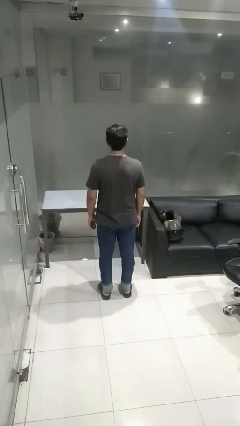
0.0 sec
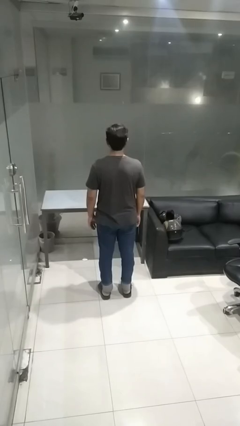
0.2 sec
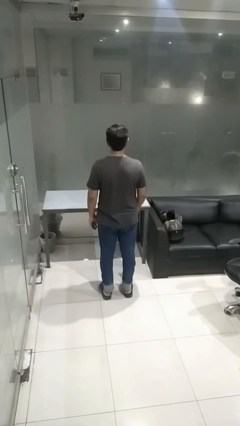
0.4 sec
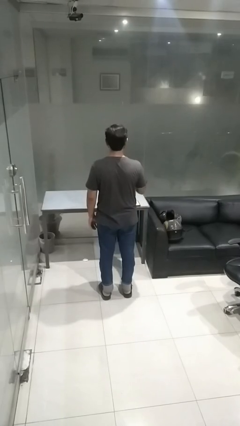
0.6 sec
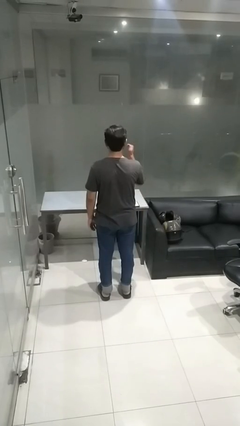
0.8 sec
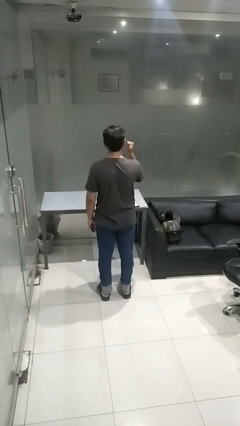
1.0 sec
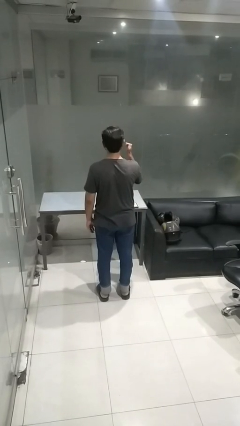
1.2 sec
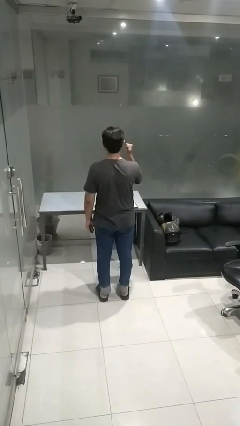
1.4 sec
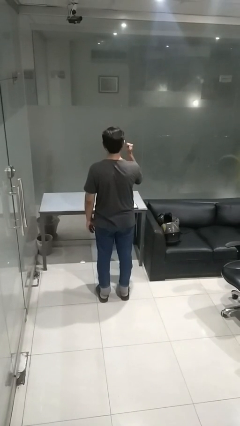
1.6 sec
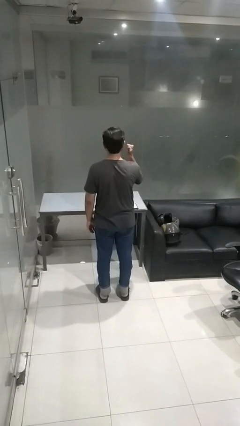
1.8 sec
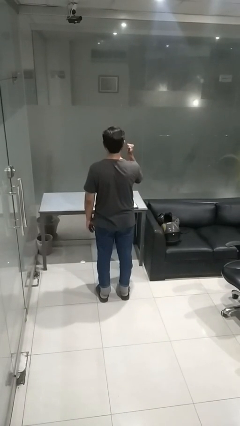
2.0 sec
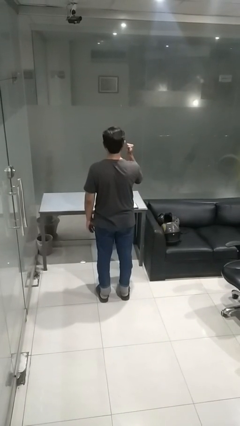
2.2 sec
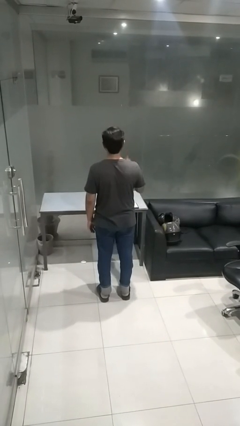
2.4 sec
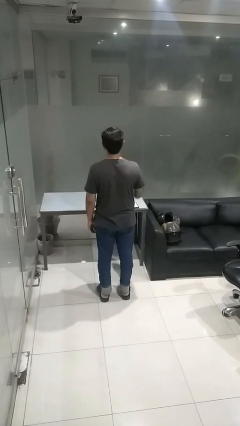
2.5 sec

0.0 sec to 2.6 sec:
person gestures behind me

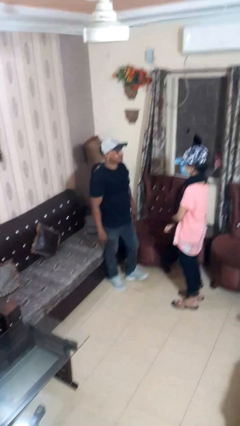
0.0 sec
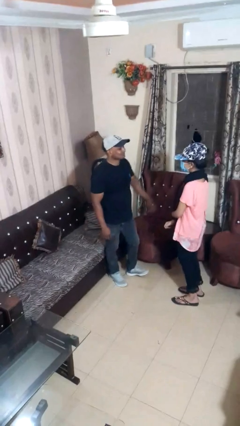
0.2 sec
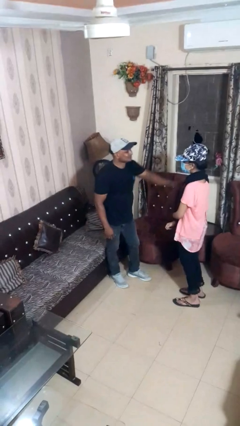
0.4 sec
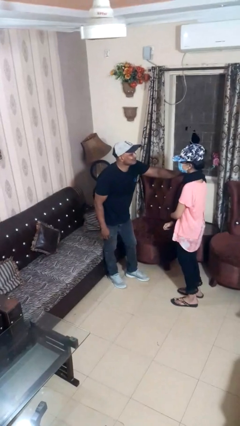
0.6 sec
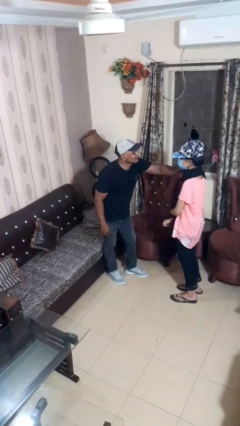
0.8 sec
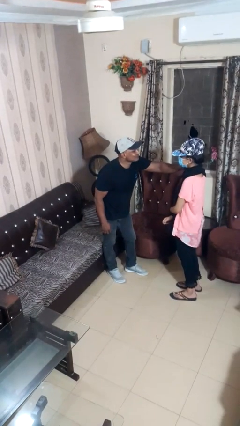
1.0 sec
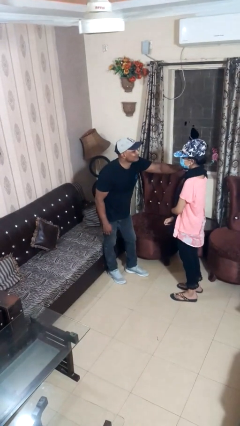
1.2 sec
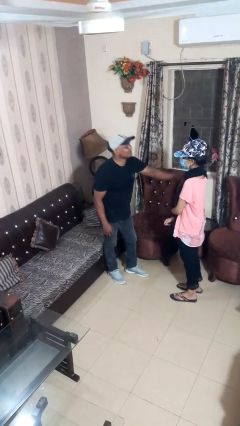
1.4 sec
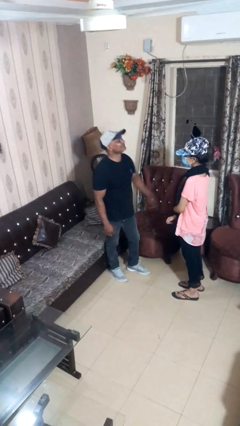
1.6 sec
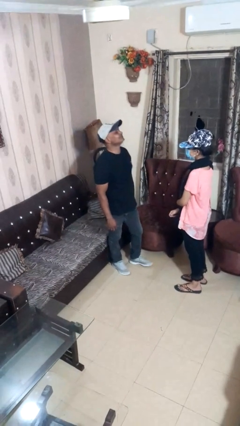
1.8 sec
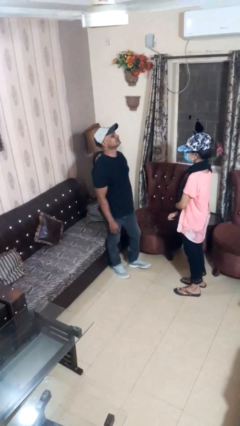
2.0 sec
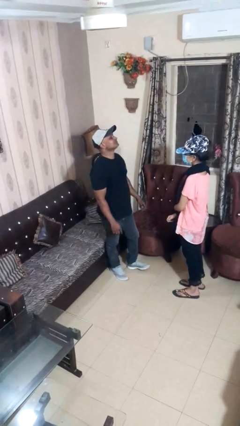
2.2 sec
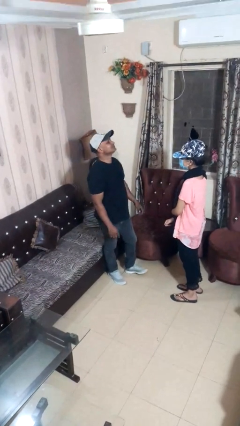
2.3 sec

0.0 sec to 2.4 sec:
person pounds shoulders of person

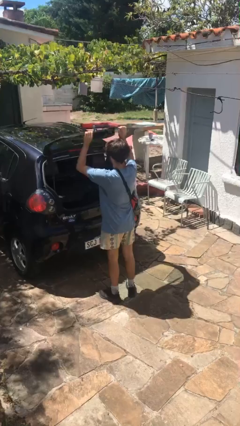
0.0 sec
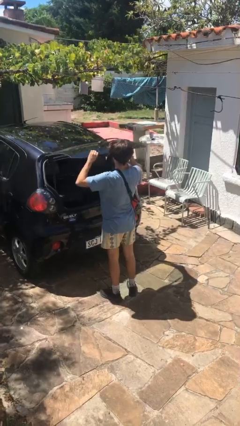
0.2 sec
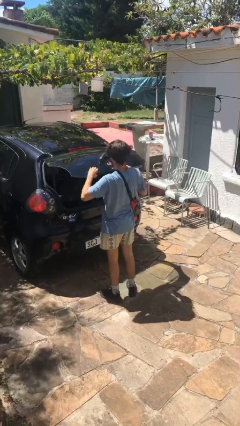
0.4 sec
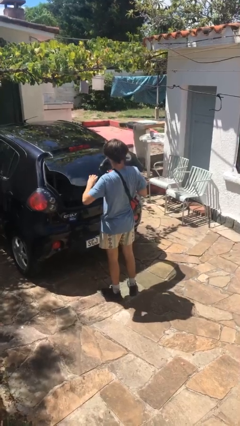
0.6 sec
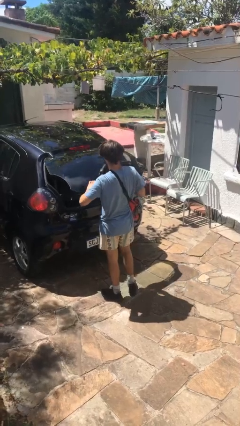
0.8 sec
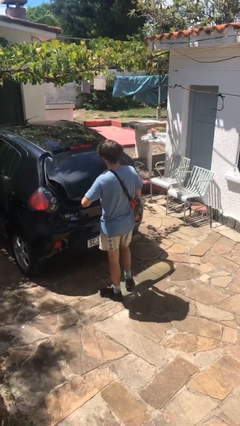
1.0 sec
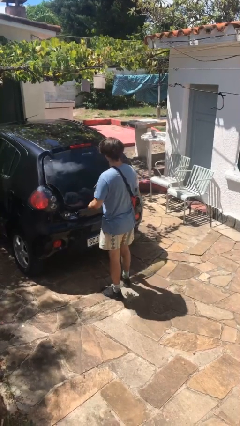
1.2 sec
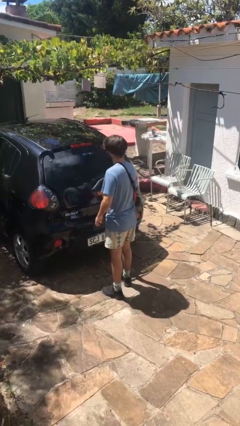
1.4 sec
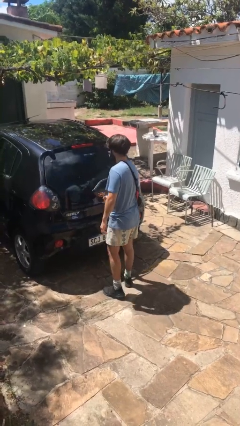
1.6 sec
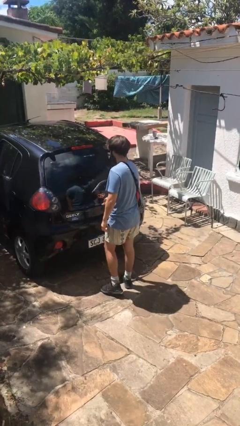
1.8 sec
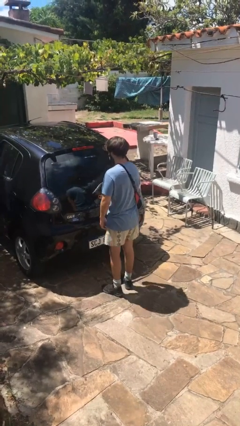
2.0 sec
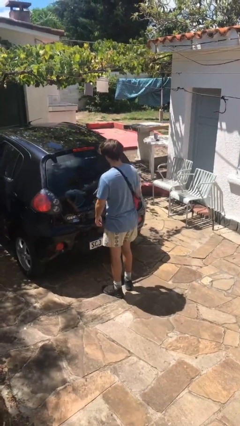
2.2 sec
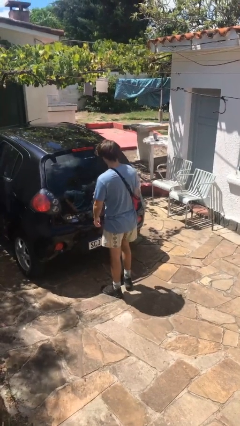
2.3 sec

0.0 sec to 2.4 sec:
person closes car trunk

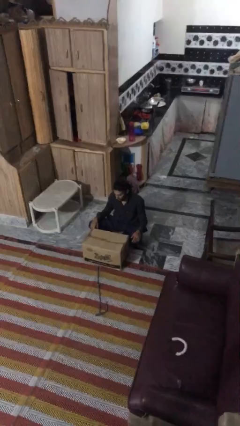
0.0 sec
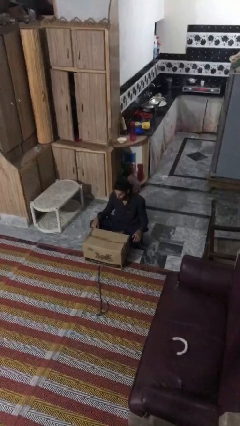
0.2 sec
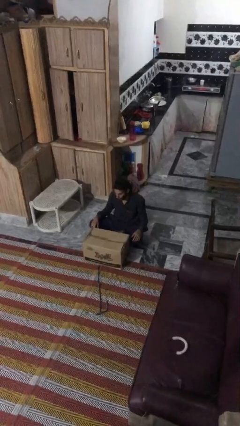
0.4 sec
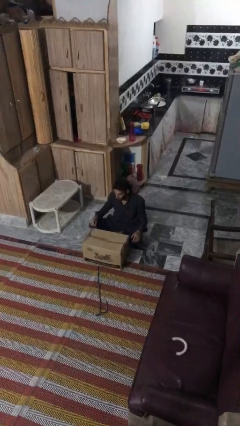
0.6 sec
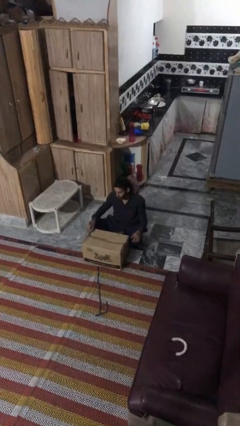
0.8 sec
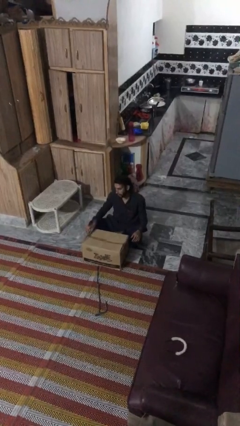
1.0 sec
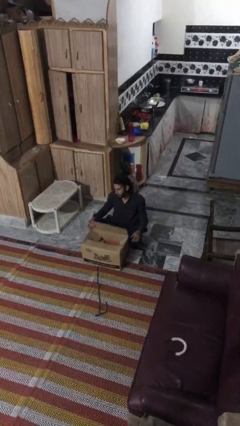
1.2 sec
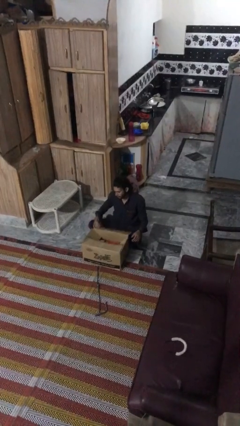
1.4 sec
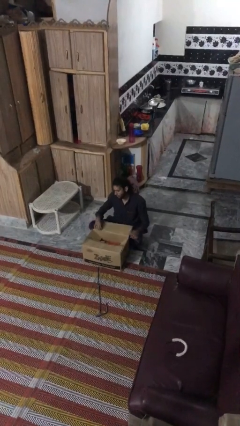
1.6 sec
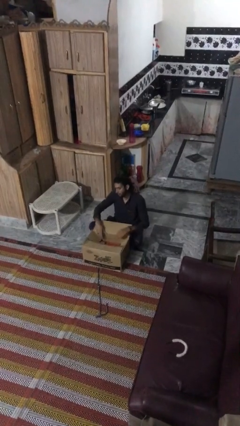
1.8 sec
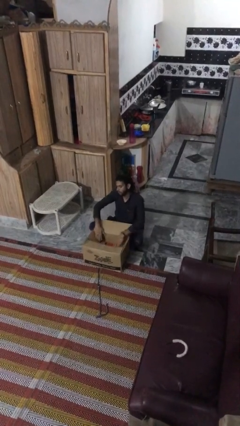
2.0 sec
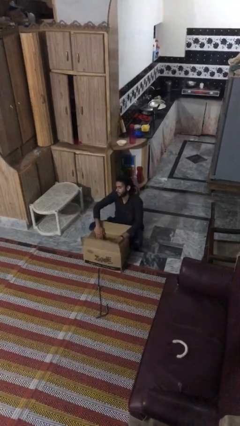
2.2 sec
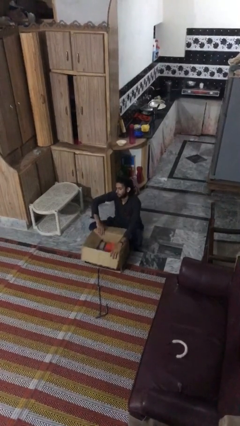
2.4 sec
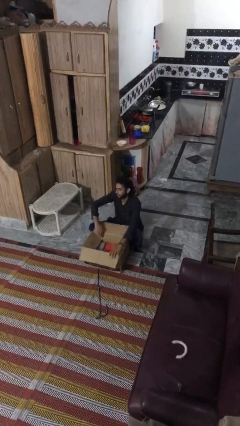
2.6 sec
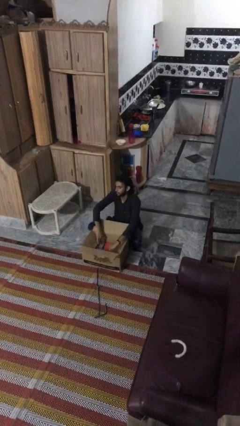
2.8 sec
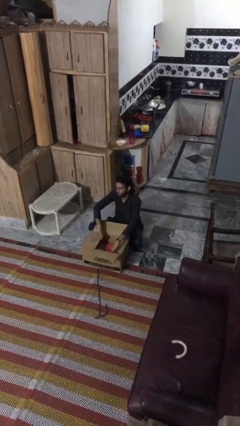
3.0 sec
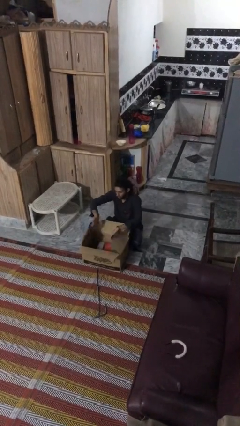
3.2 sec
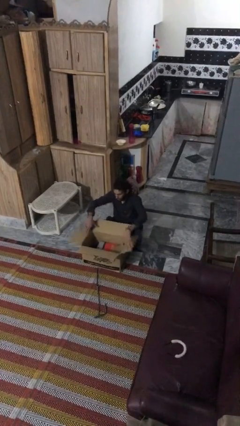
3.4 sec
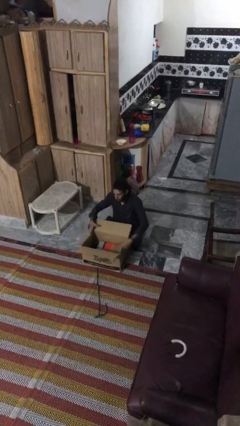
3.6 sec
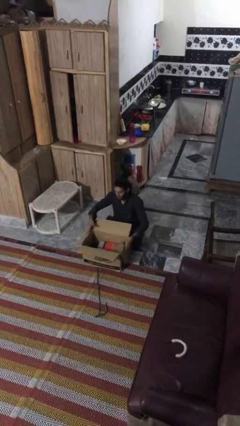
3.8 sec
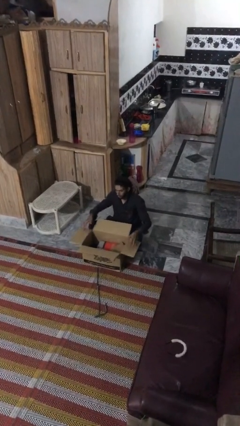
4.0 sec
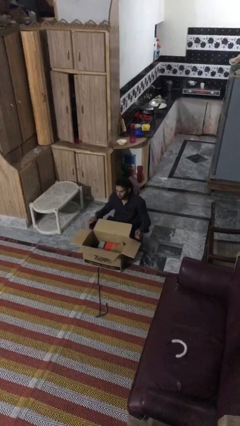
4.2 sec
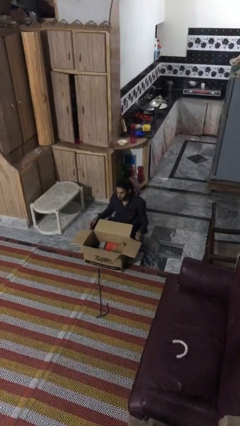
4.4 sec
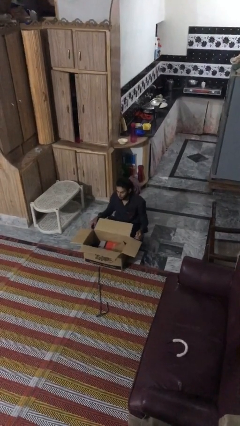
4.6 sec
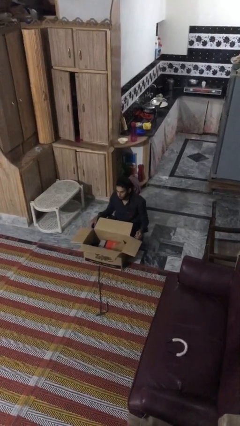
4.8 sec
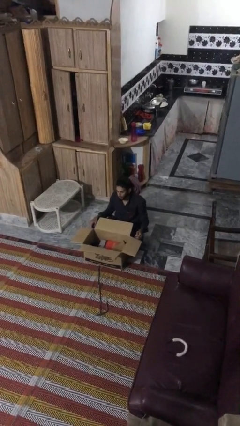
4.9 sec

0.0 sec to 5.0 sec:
person opens box

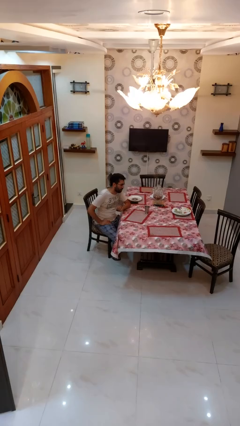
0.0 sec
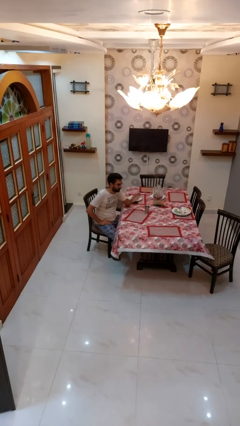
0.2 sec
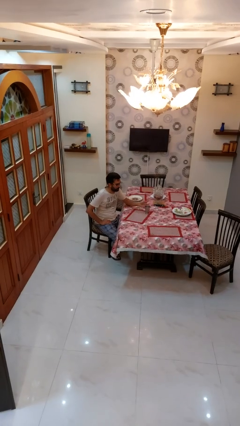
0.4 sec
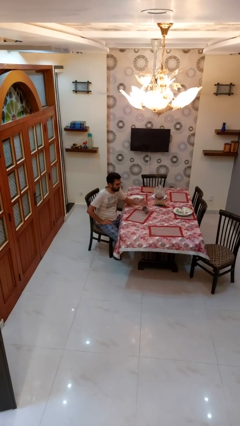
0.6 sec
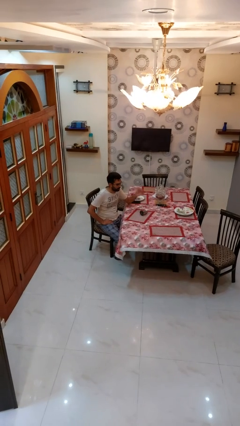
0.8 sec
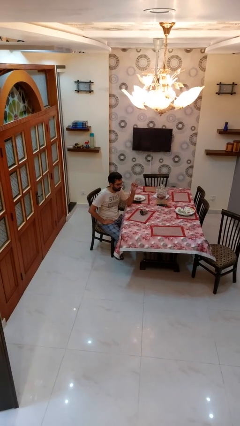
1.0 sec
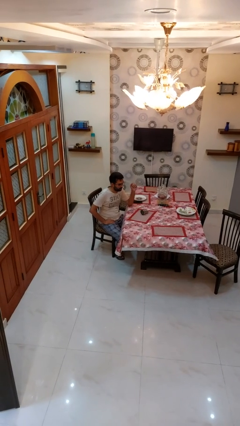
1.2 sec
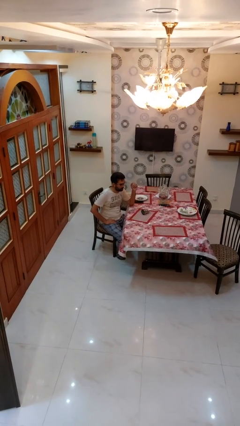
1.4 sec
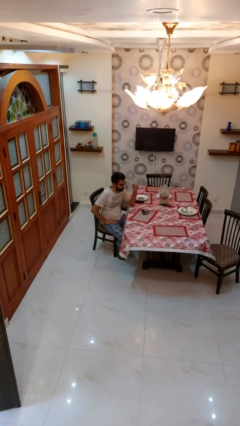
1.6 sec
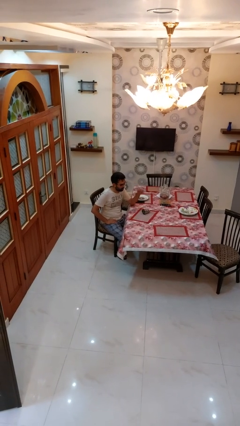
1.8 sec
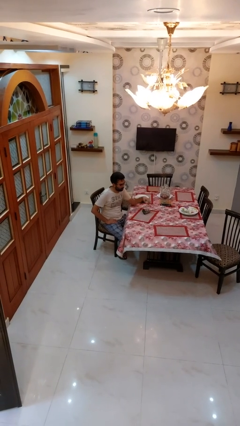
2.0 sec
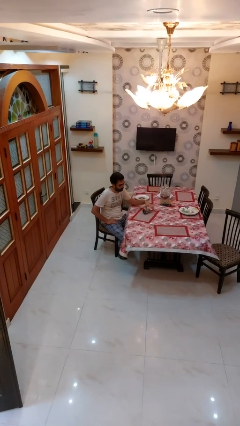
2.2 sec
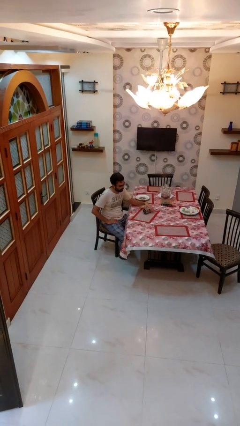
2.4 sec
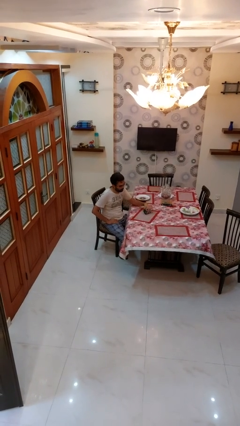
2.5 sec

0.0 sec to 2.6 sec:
person knocks over glass

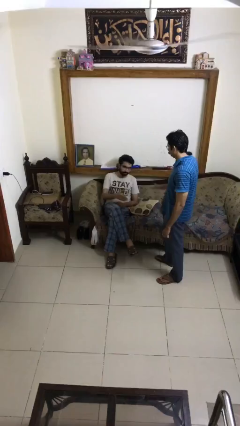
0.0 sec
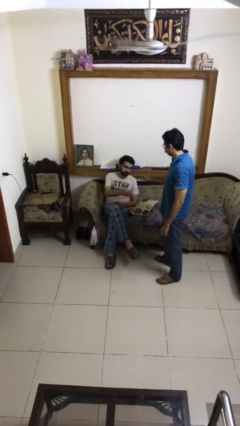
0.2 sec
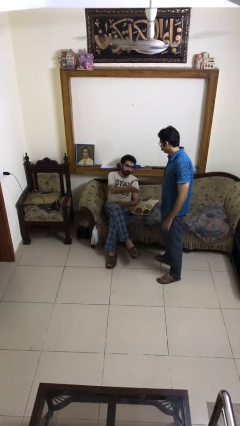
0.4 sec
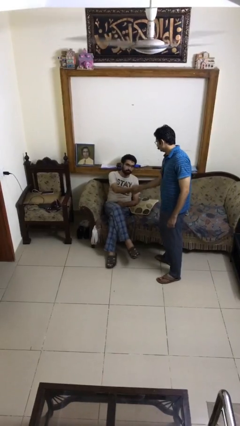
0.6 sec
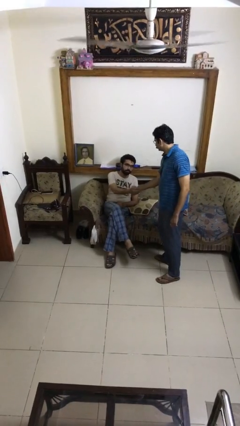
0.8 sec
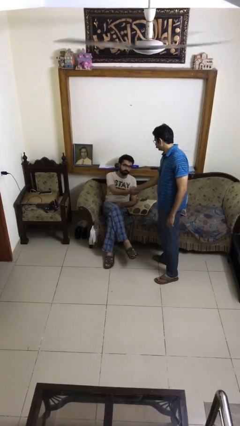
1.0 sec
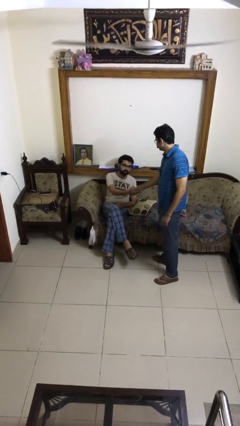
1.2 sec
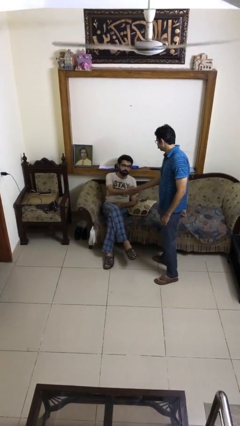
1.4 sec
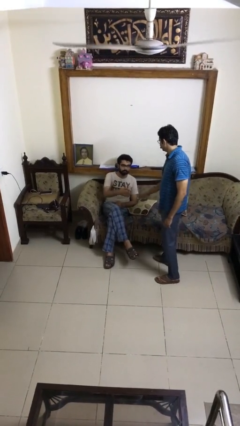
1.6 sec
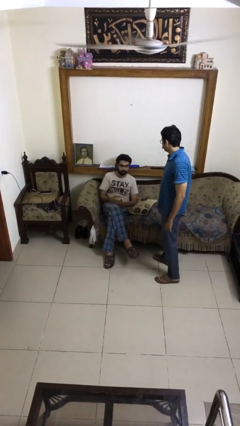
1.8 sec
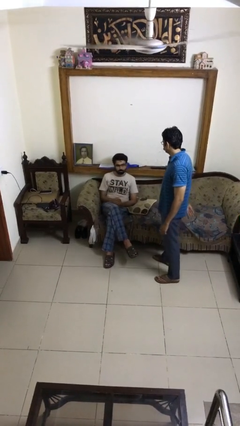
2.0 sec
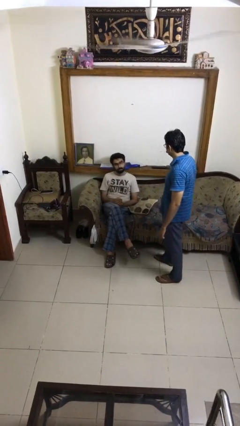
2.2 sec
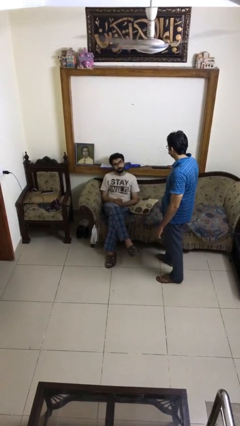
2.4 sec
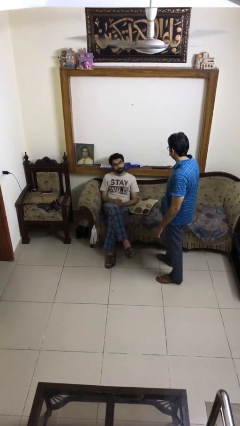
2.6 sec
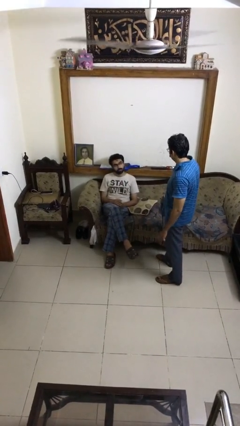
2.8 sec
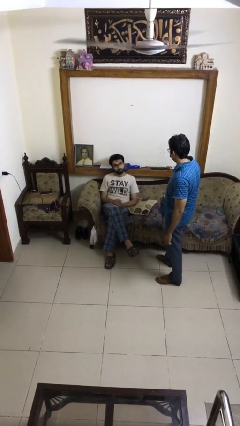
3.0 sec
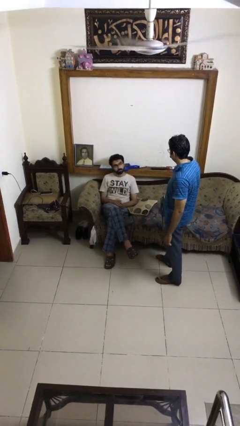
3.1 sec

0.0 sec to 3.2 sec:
person shakes hand
